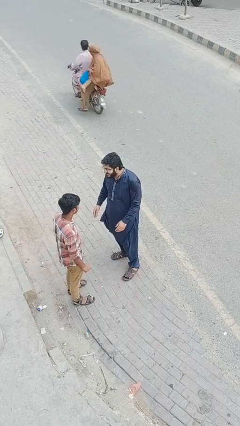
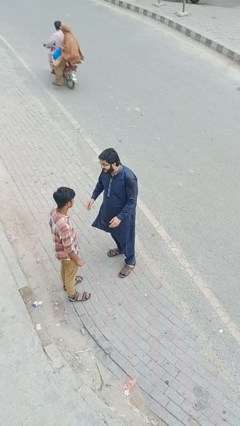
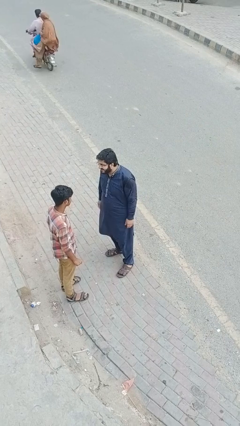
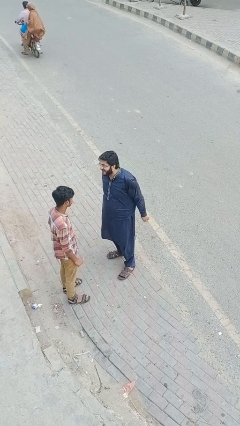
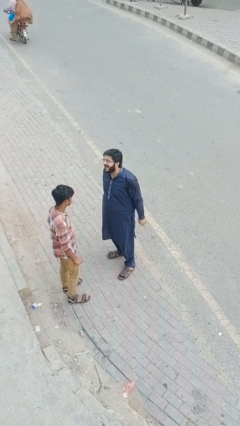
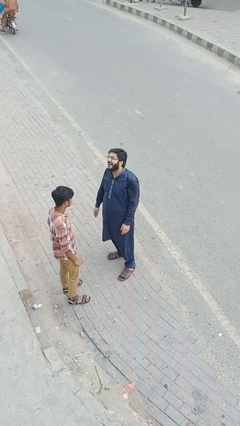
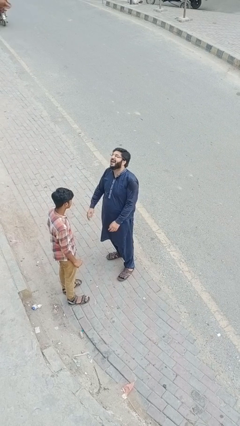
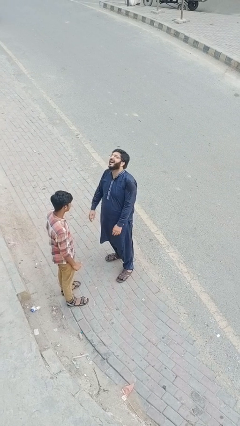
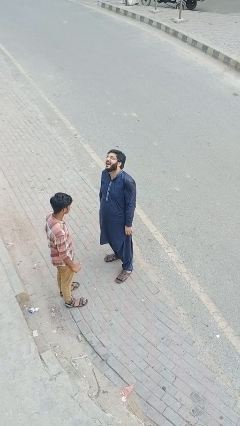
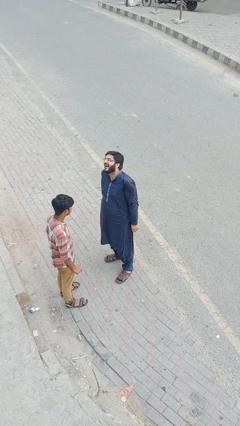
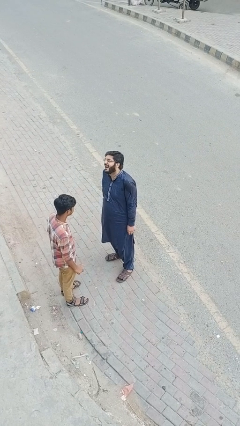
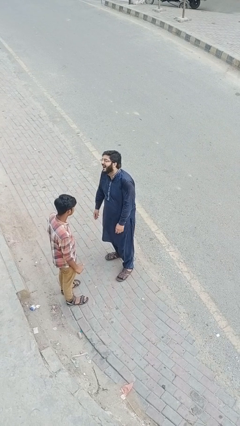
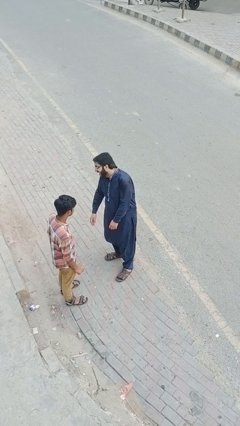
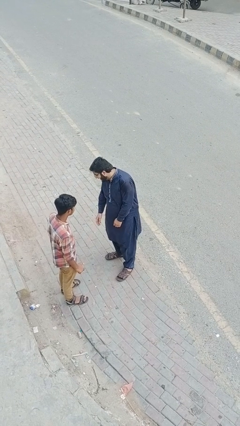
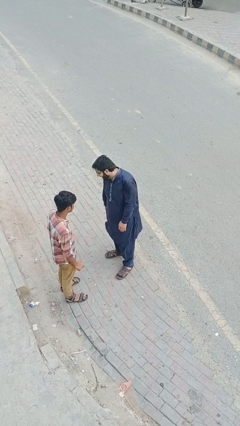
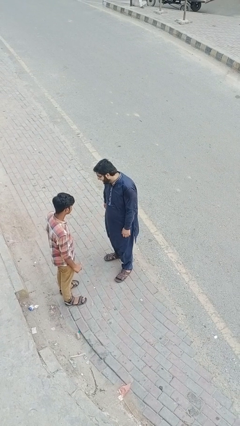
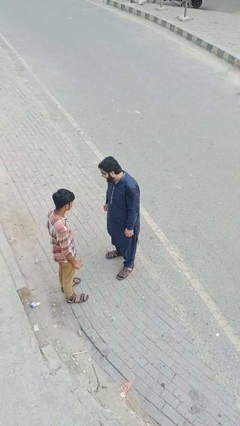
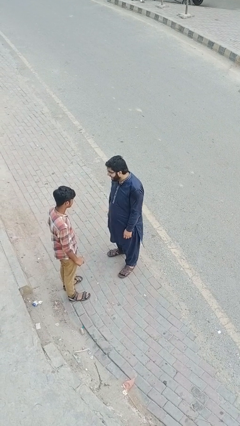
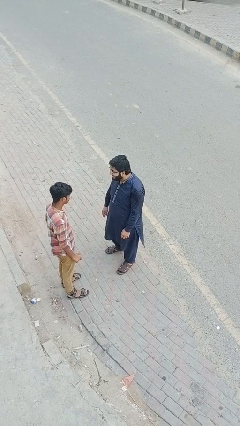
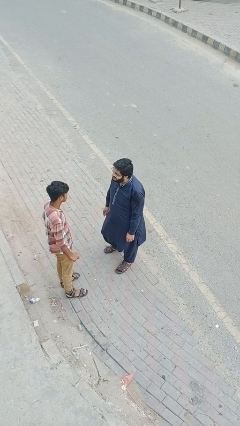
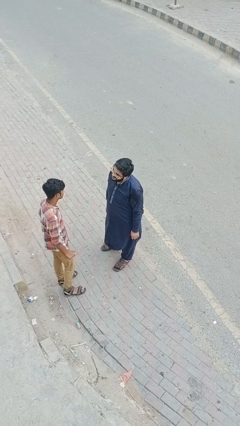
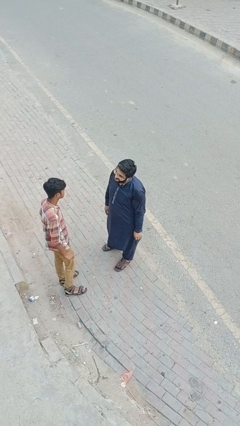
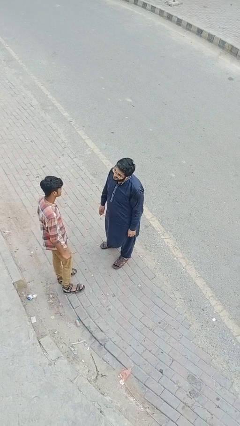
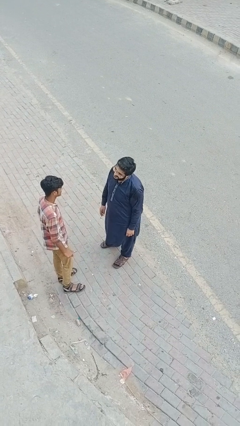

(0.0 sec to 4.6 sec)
person laughs with person

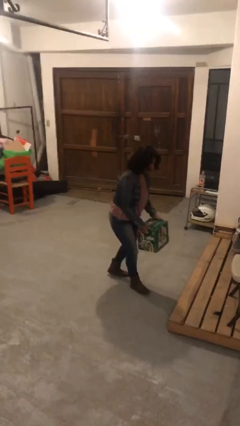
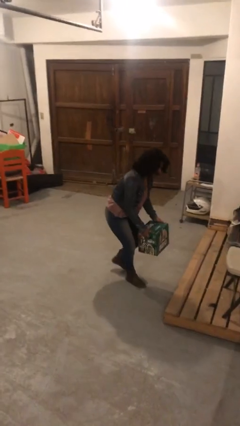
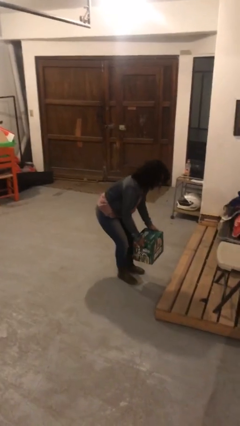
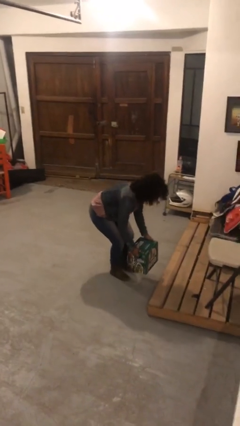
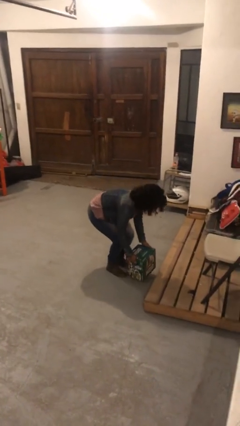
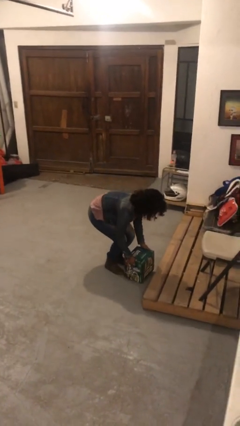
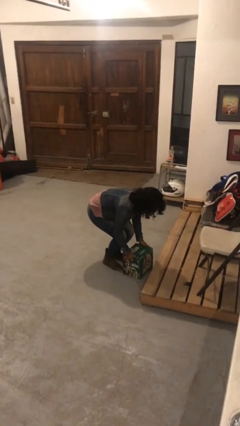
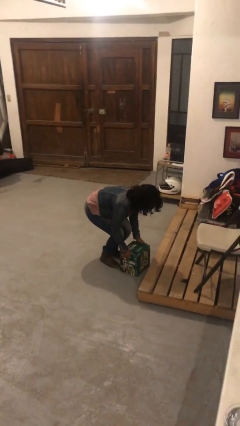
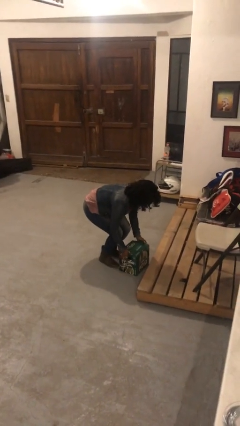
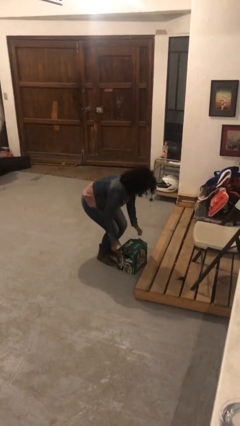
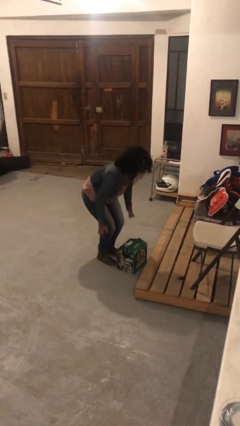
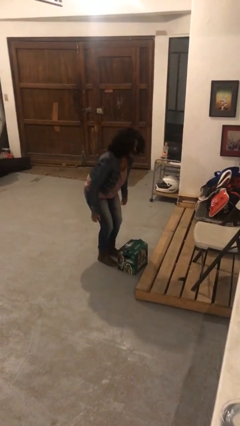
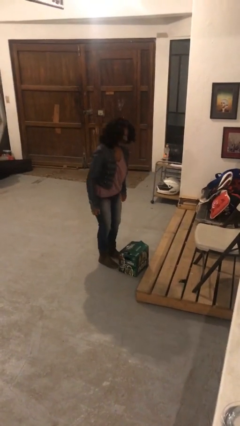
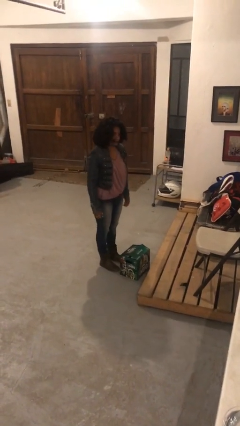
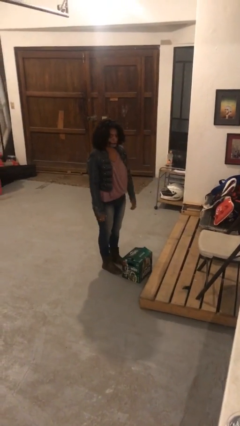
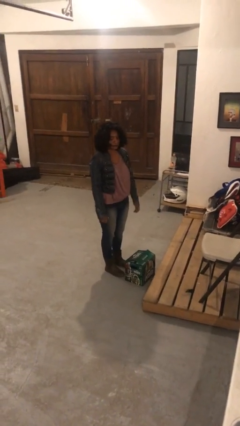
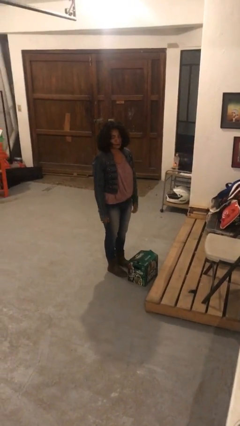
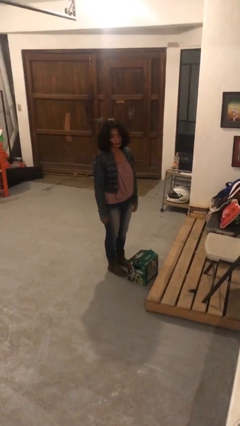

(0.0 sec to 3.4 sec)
person puts down object on floor

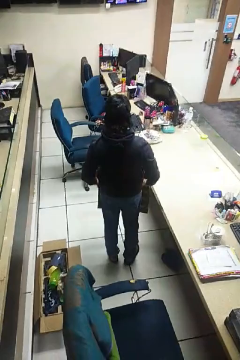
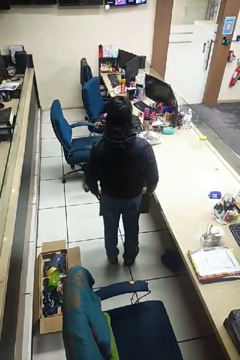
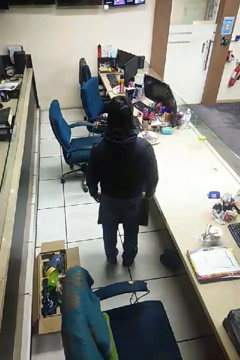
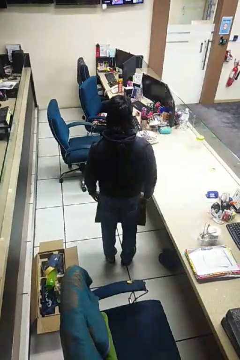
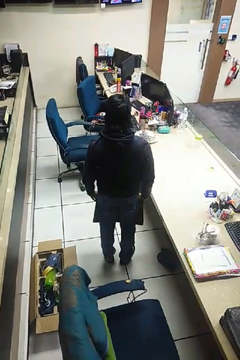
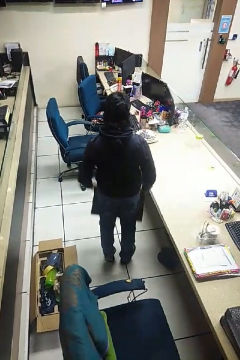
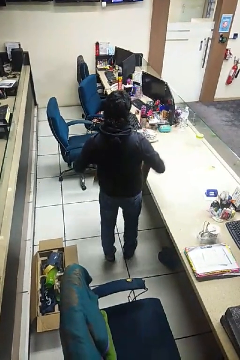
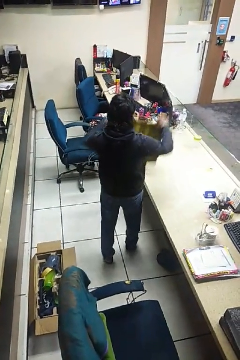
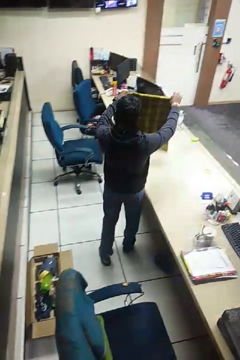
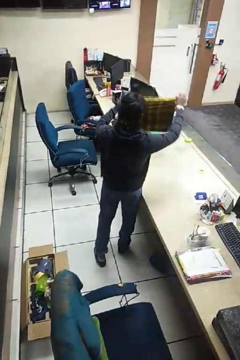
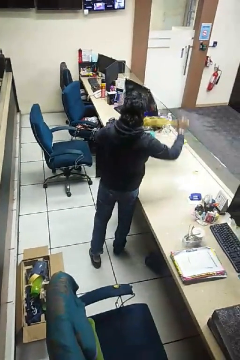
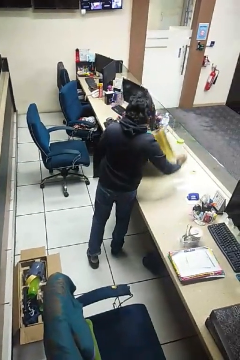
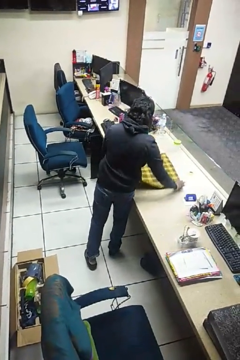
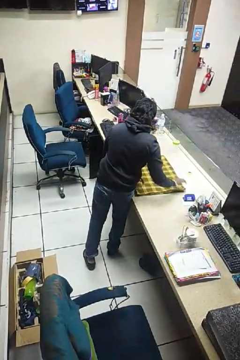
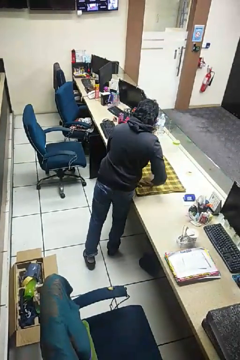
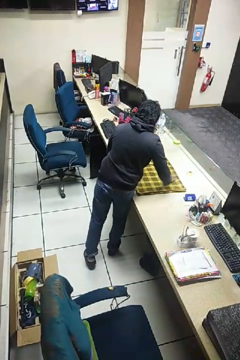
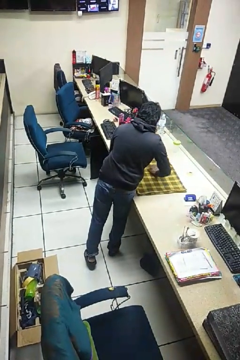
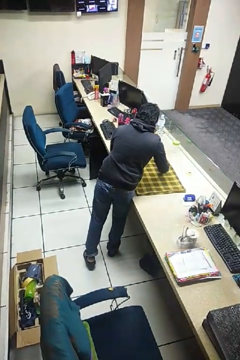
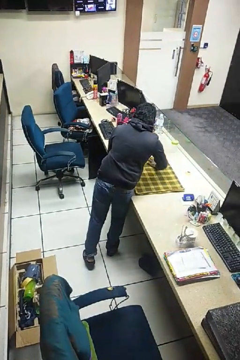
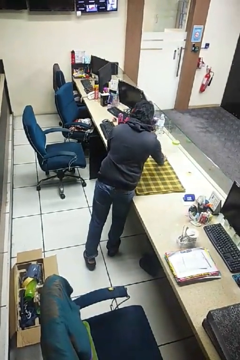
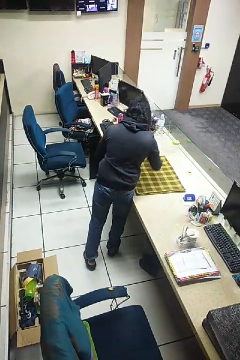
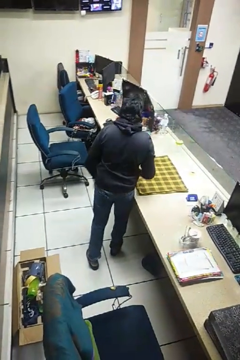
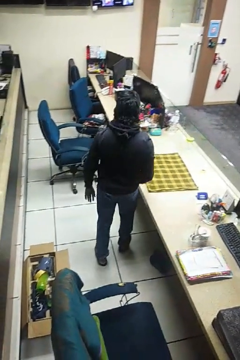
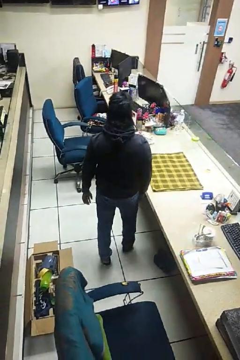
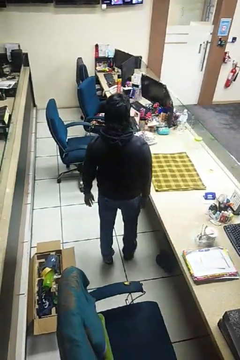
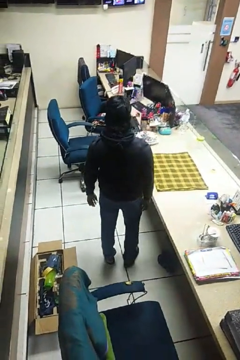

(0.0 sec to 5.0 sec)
person spreads tablecloth

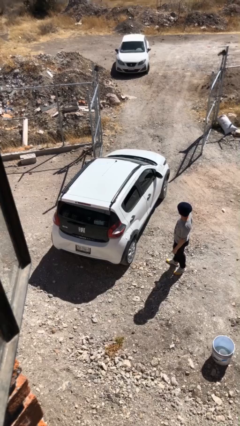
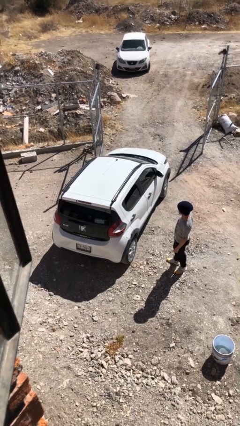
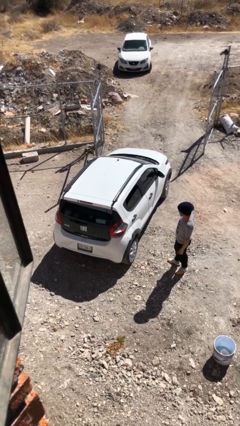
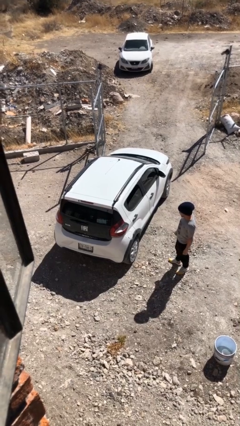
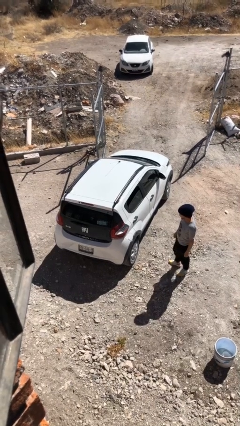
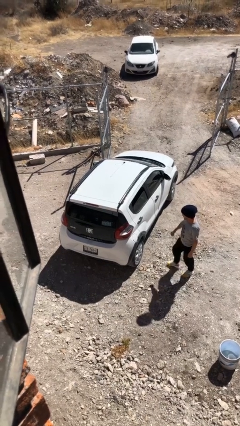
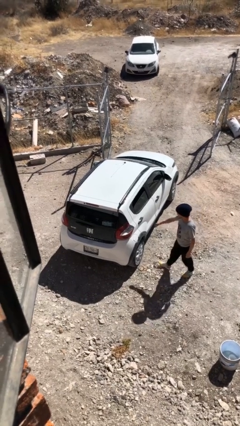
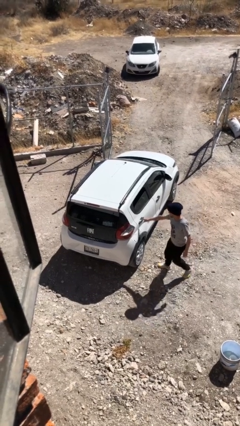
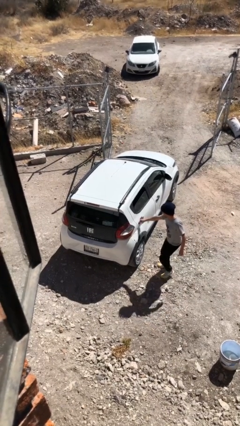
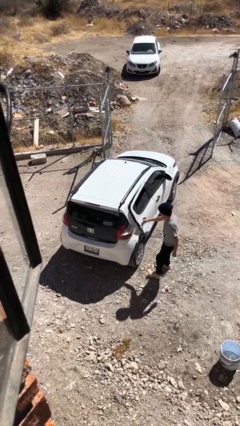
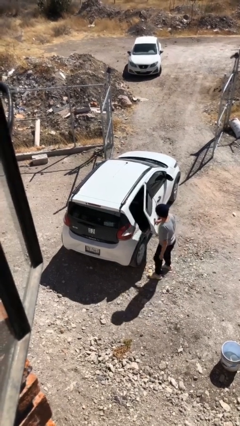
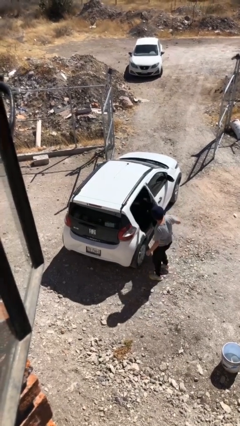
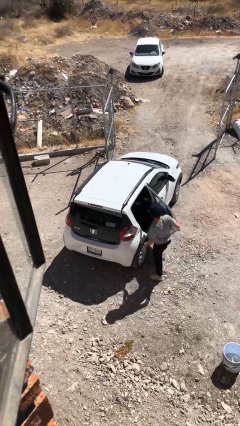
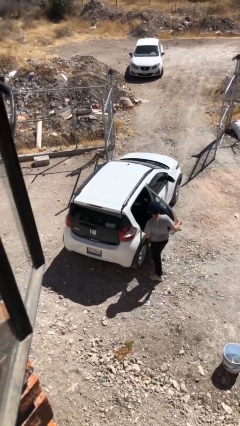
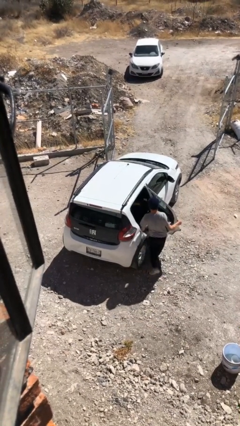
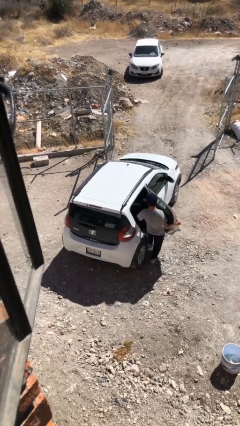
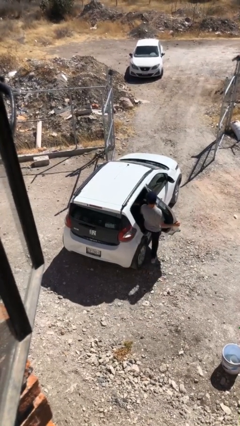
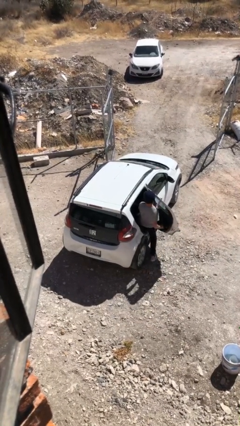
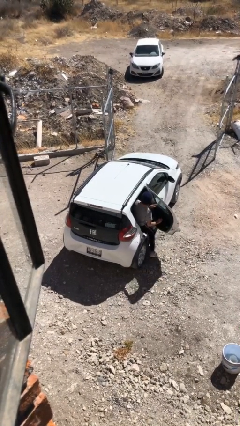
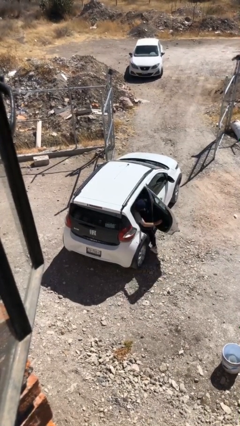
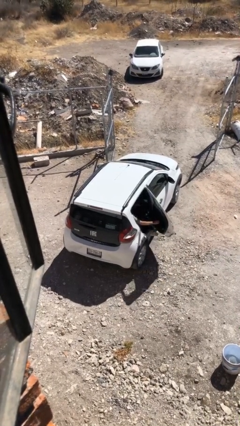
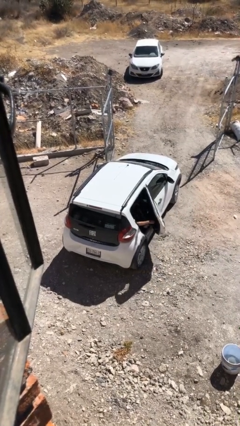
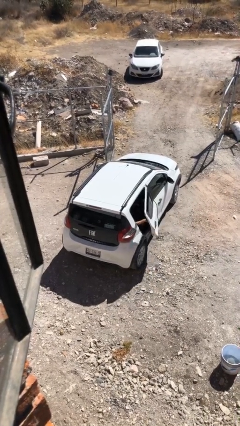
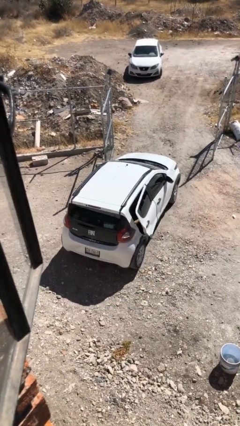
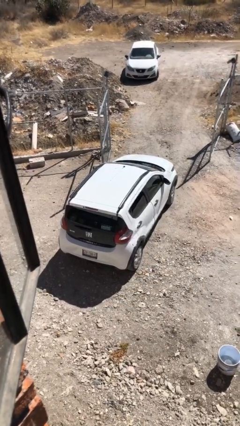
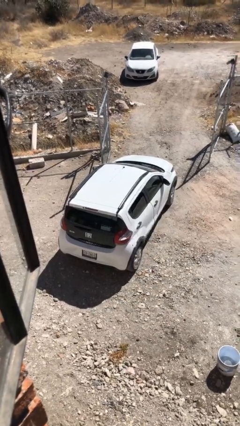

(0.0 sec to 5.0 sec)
car picks up person

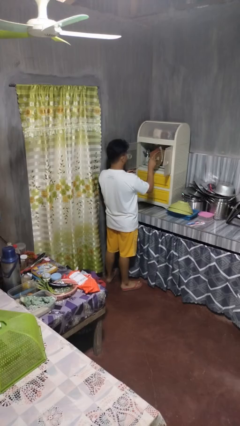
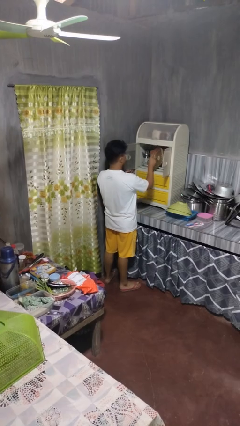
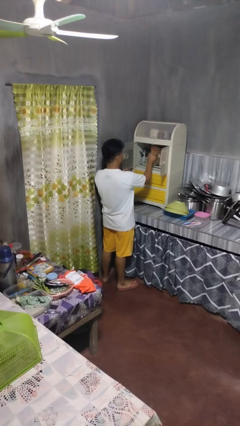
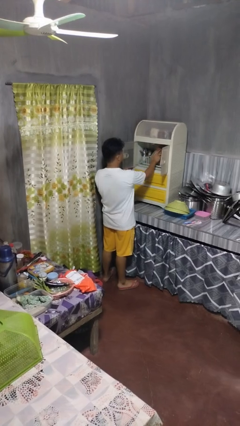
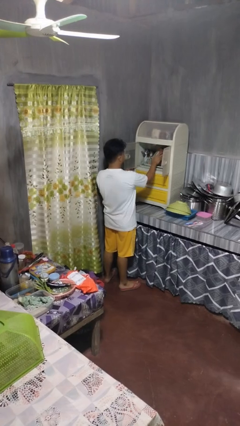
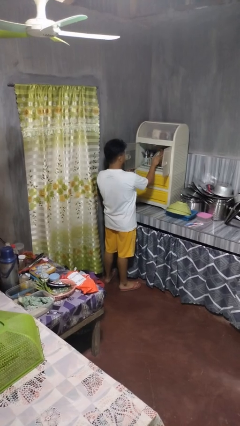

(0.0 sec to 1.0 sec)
person puts object in cabinet
